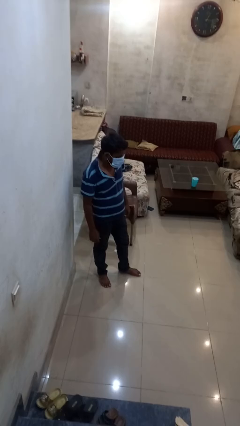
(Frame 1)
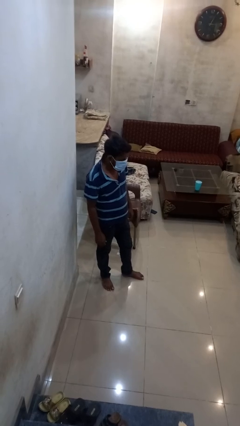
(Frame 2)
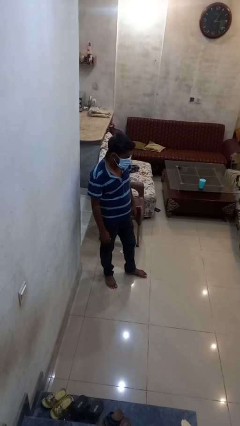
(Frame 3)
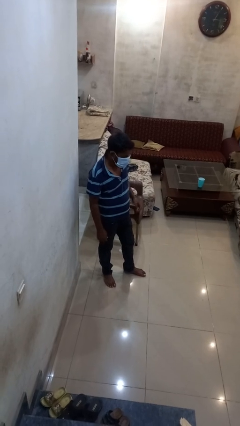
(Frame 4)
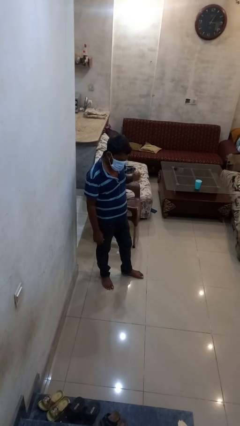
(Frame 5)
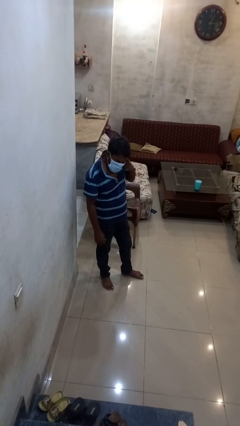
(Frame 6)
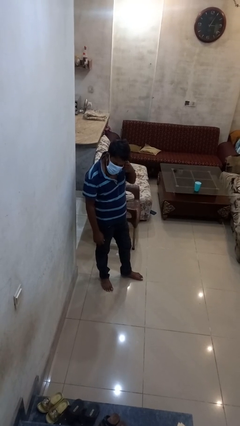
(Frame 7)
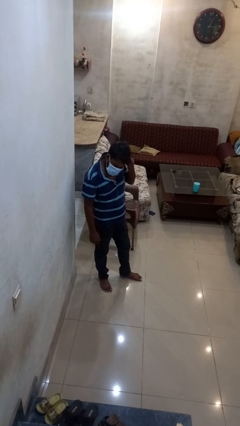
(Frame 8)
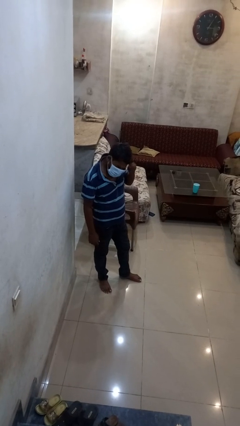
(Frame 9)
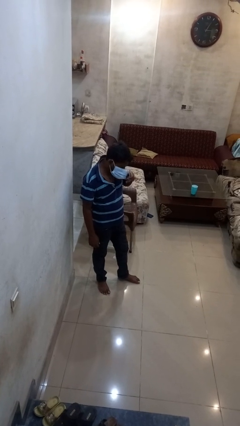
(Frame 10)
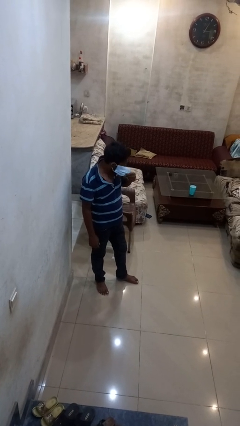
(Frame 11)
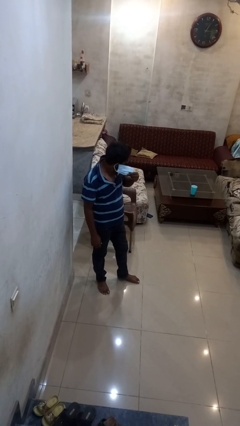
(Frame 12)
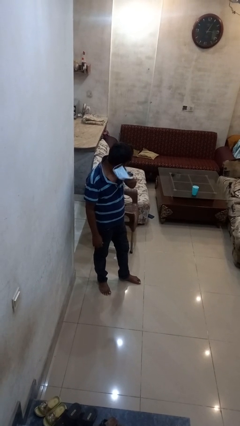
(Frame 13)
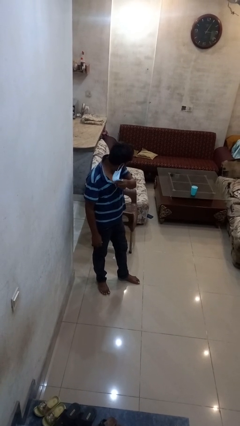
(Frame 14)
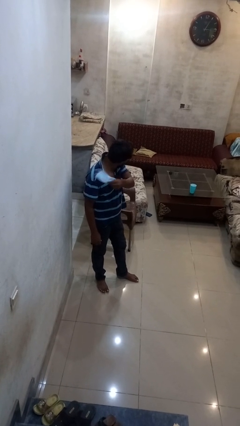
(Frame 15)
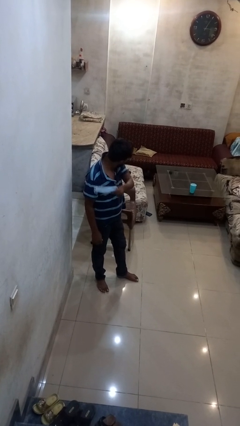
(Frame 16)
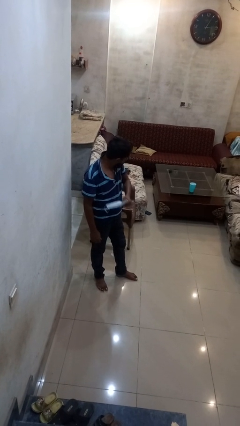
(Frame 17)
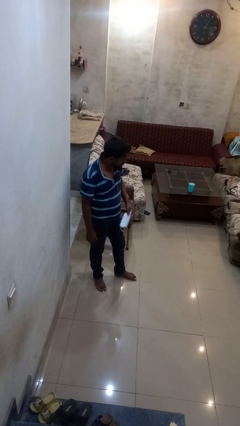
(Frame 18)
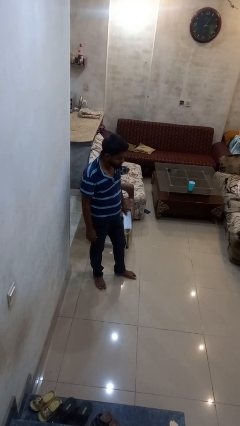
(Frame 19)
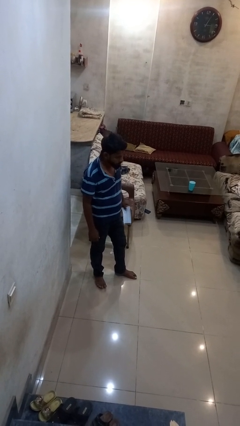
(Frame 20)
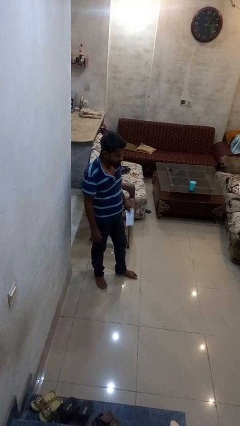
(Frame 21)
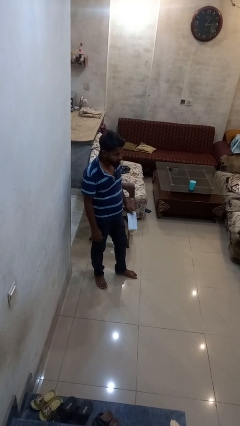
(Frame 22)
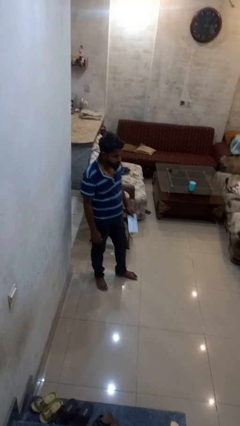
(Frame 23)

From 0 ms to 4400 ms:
person takes off facemask

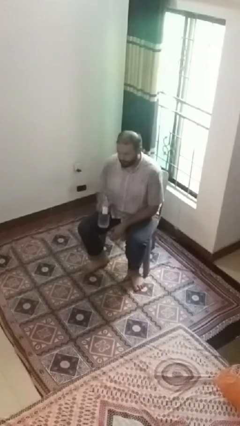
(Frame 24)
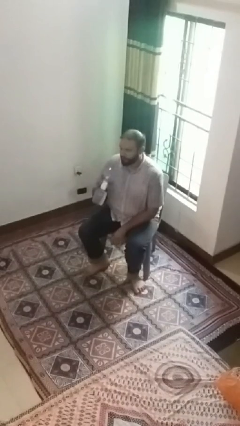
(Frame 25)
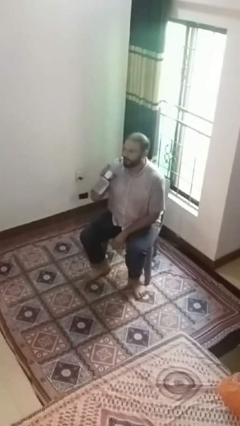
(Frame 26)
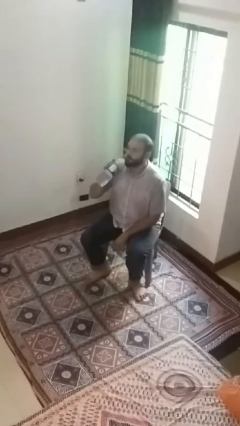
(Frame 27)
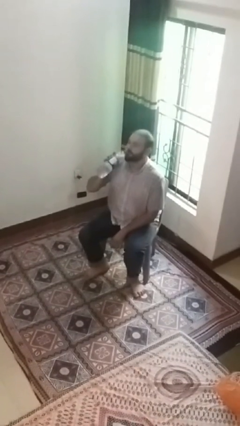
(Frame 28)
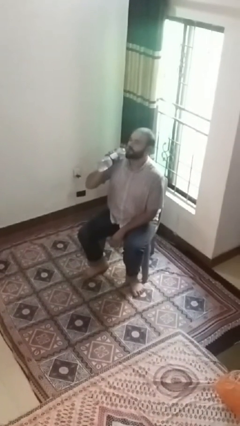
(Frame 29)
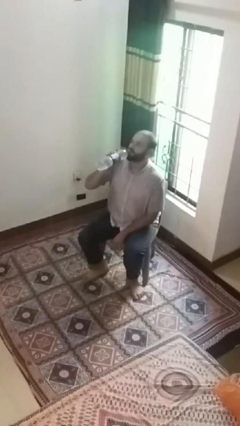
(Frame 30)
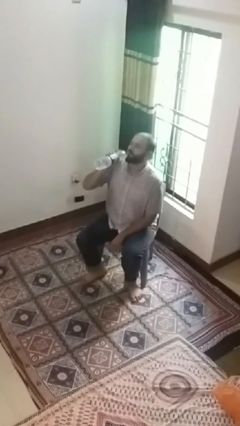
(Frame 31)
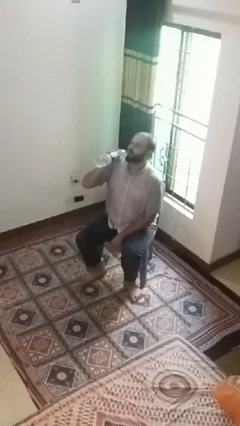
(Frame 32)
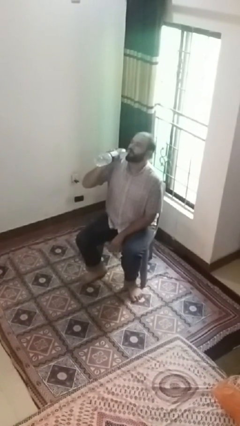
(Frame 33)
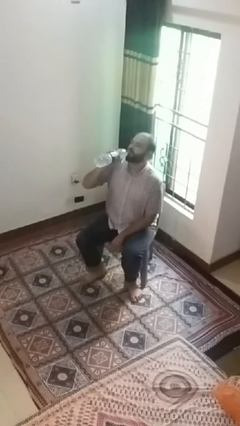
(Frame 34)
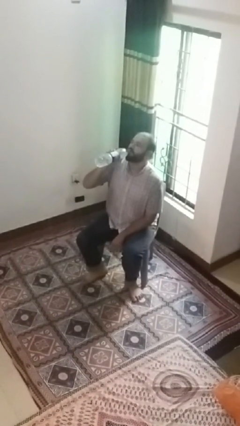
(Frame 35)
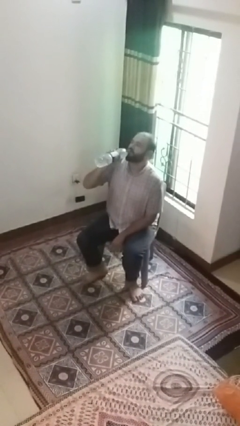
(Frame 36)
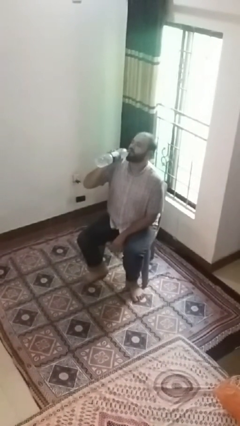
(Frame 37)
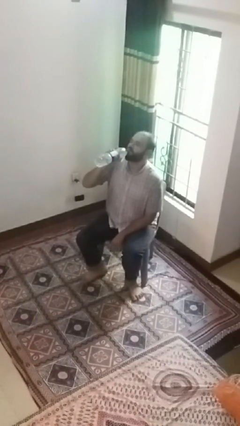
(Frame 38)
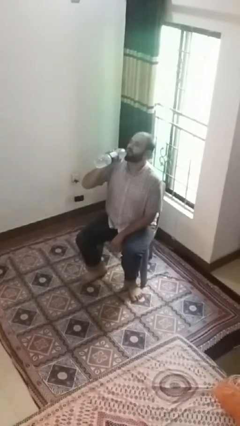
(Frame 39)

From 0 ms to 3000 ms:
person drinks from bottle

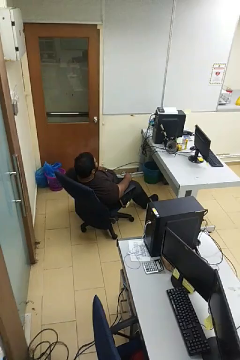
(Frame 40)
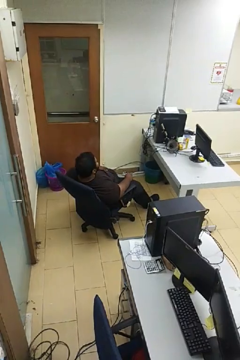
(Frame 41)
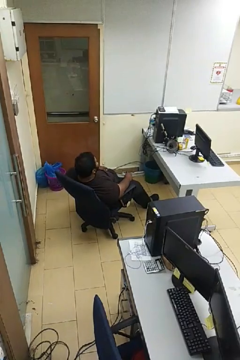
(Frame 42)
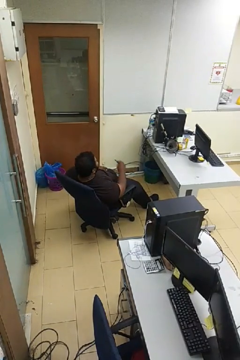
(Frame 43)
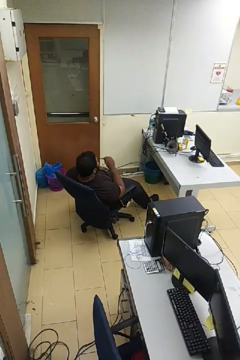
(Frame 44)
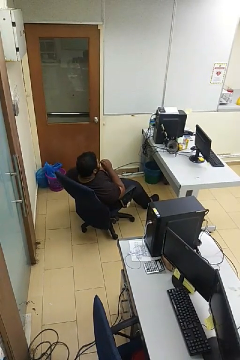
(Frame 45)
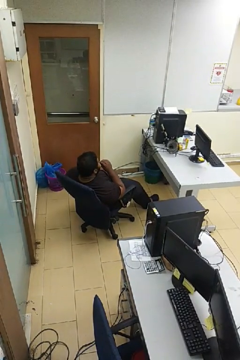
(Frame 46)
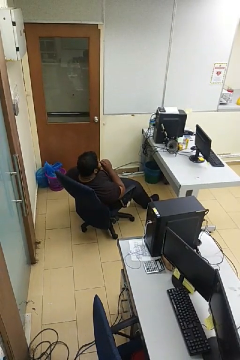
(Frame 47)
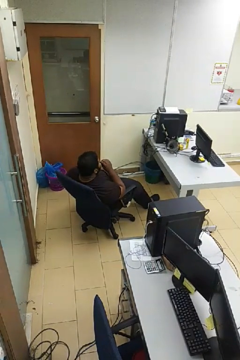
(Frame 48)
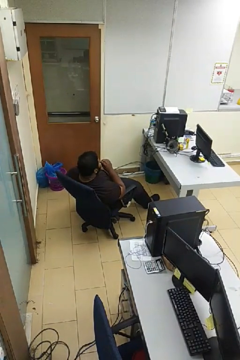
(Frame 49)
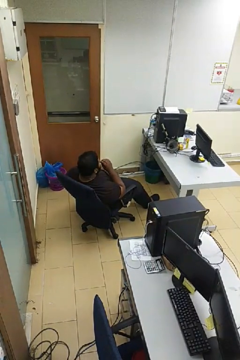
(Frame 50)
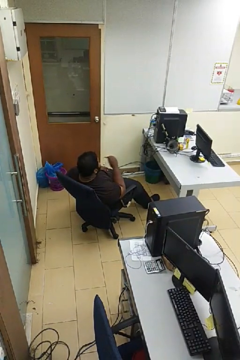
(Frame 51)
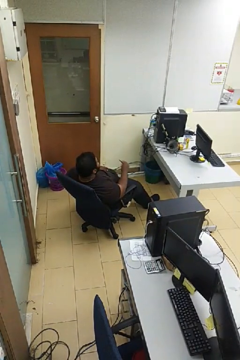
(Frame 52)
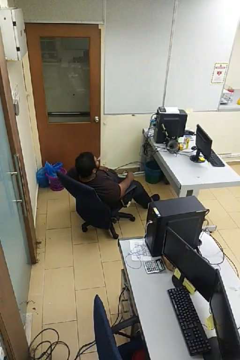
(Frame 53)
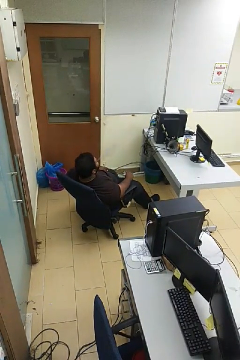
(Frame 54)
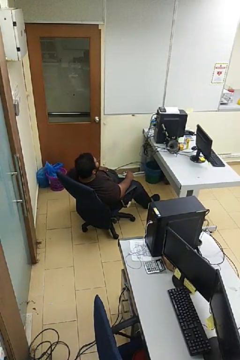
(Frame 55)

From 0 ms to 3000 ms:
person vapes

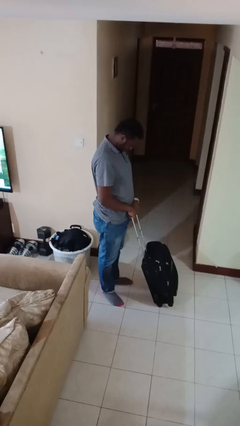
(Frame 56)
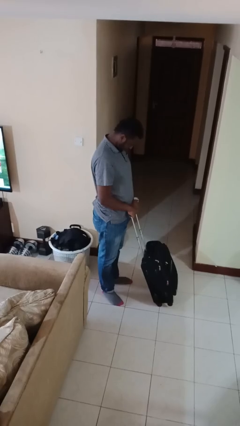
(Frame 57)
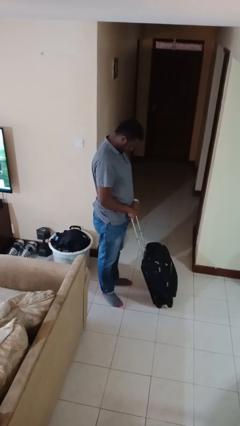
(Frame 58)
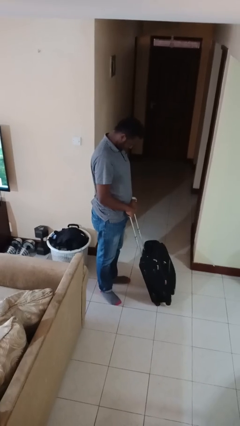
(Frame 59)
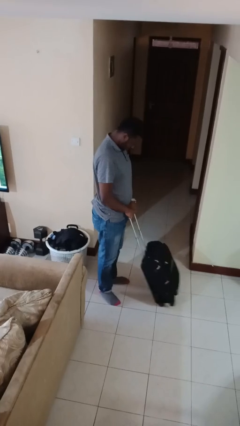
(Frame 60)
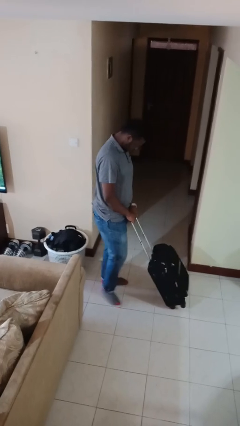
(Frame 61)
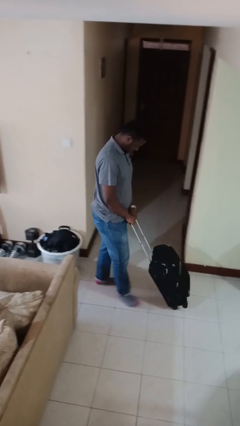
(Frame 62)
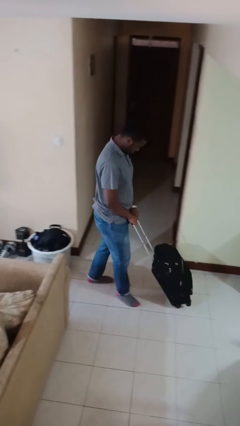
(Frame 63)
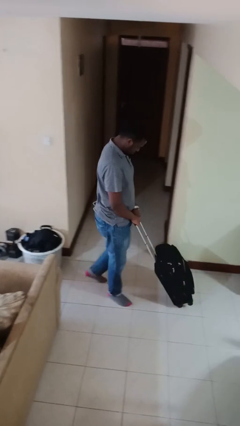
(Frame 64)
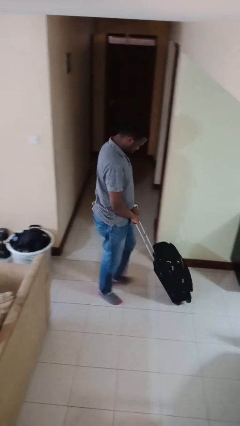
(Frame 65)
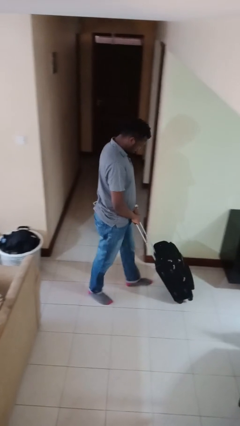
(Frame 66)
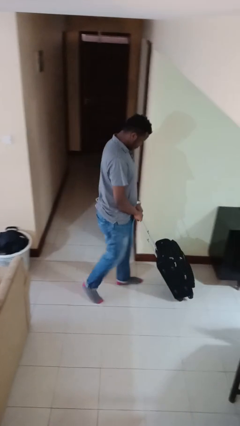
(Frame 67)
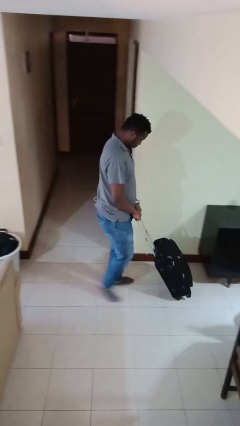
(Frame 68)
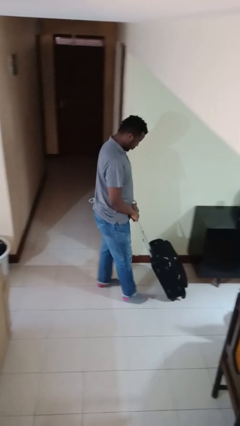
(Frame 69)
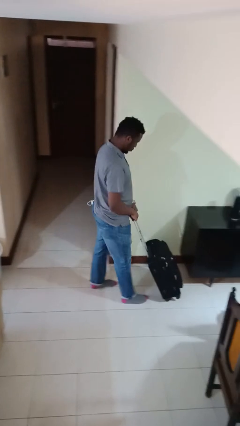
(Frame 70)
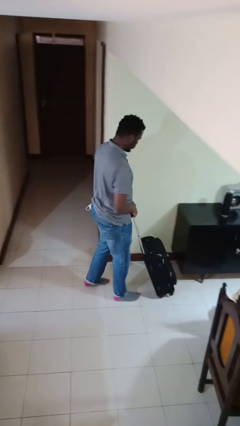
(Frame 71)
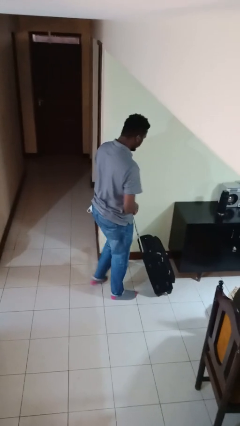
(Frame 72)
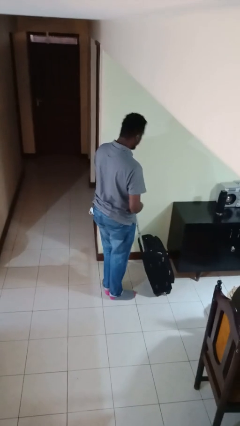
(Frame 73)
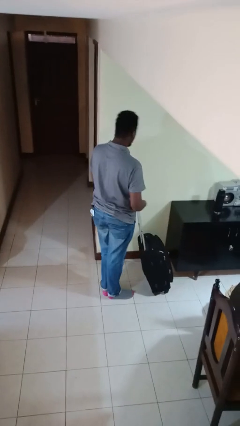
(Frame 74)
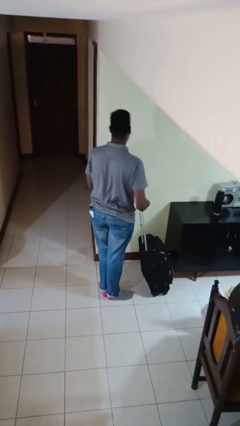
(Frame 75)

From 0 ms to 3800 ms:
person pushes wheeled cart

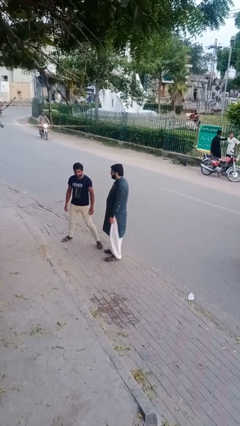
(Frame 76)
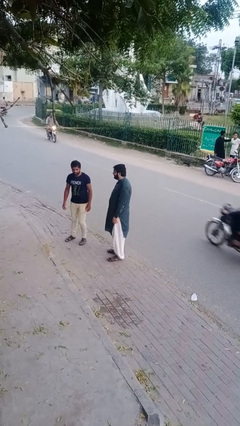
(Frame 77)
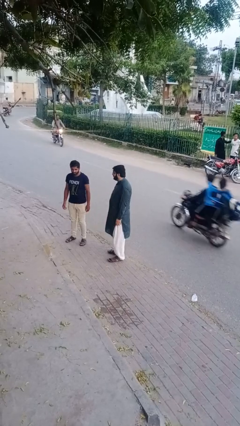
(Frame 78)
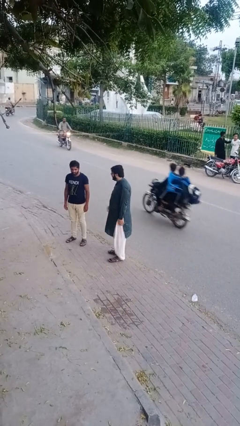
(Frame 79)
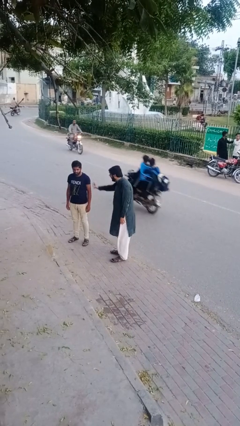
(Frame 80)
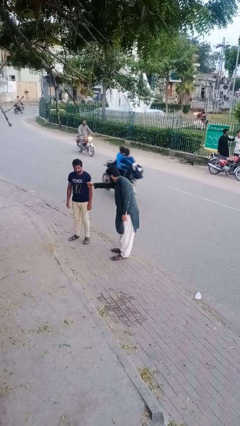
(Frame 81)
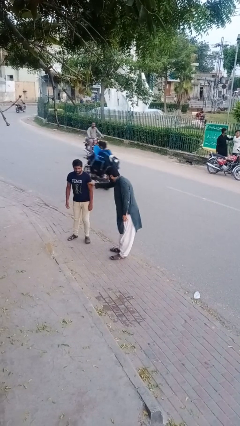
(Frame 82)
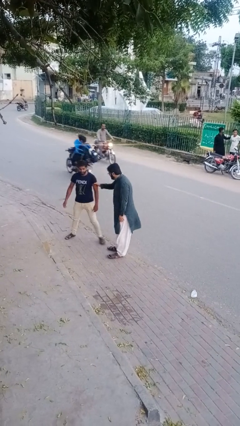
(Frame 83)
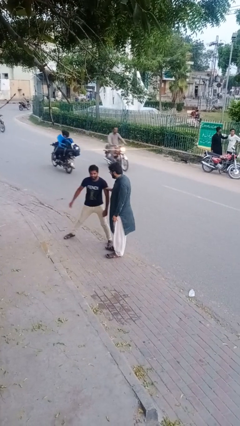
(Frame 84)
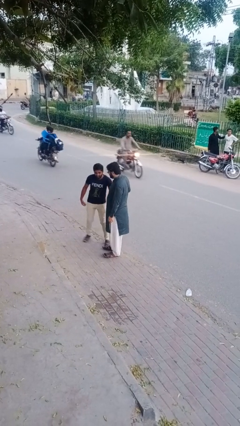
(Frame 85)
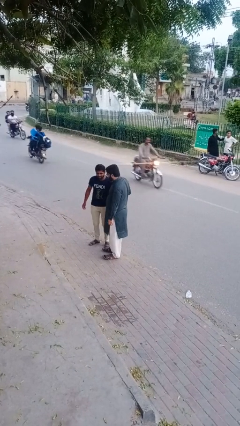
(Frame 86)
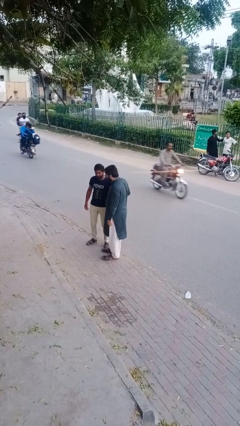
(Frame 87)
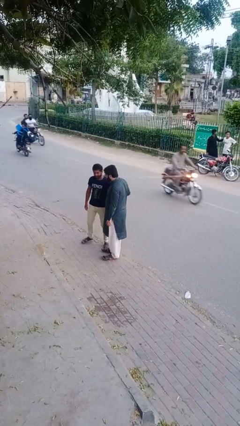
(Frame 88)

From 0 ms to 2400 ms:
person grabs person by bicep

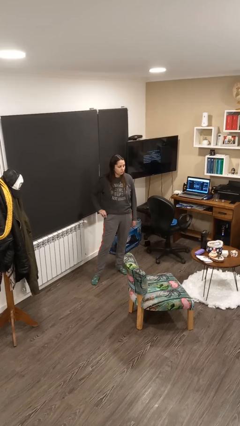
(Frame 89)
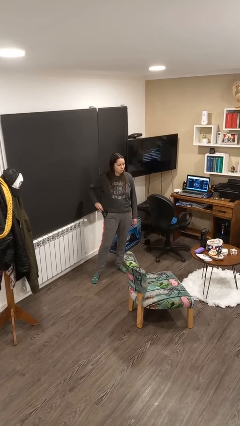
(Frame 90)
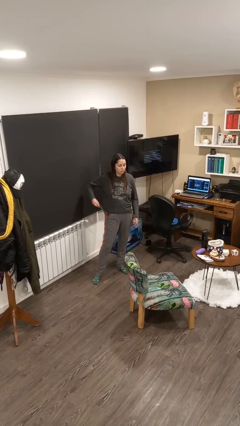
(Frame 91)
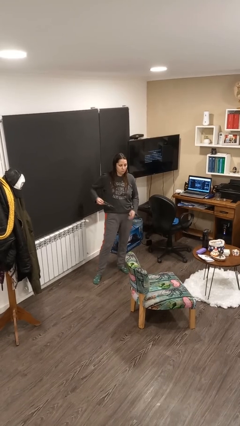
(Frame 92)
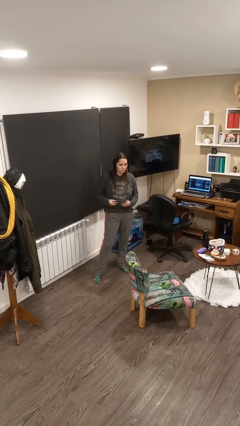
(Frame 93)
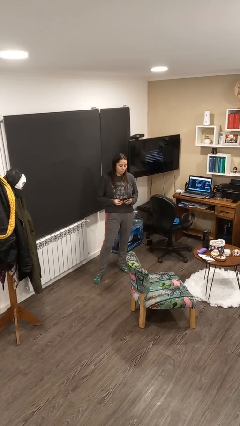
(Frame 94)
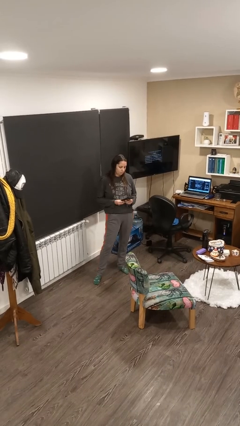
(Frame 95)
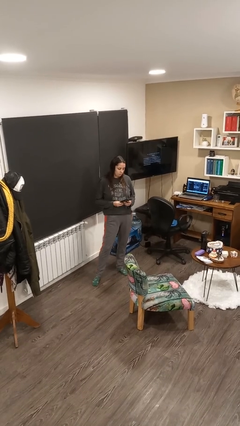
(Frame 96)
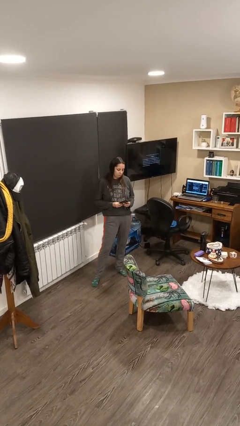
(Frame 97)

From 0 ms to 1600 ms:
person takes phone from pocket
